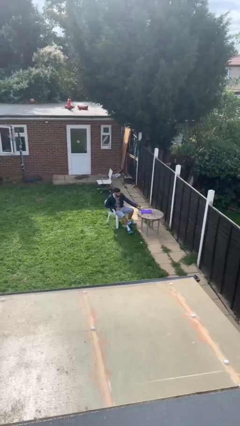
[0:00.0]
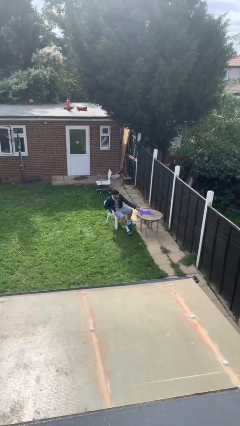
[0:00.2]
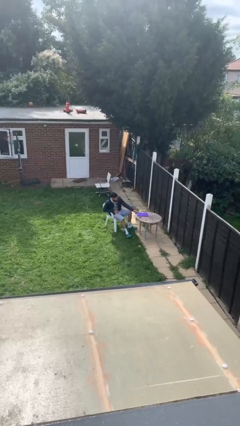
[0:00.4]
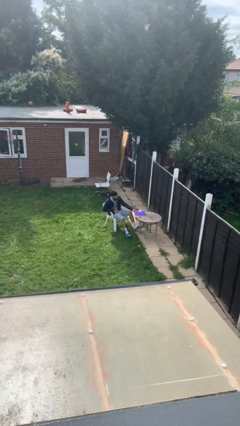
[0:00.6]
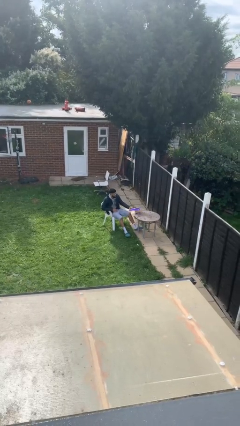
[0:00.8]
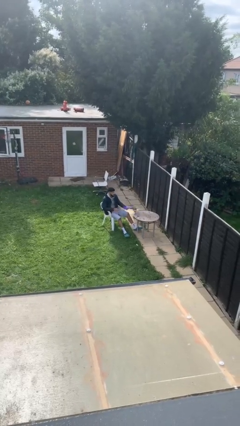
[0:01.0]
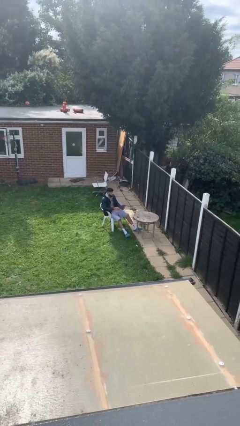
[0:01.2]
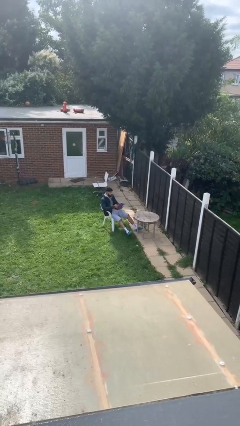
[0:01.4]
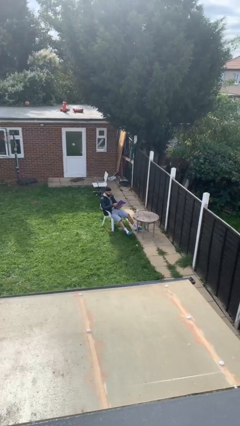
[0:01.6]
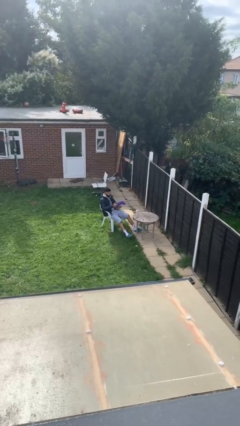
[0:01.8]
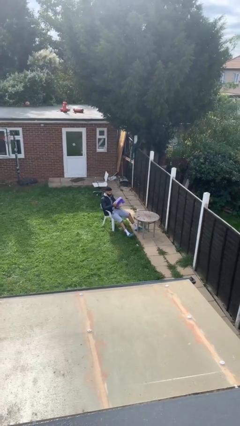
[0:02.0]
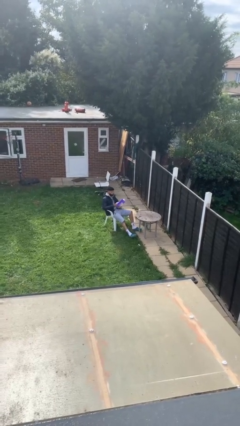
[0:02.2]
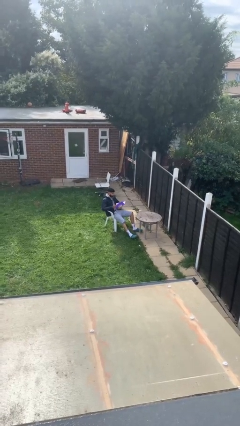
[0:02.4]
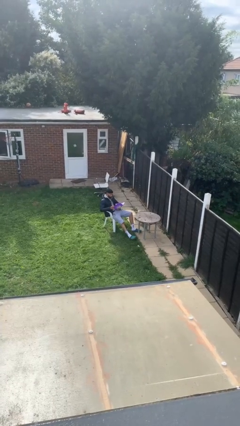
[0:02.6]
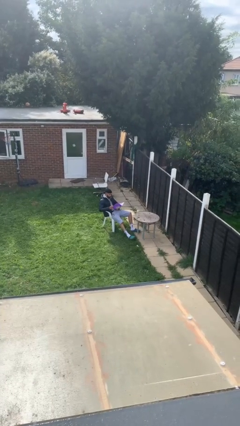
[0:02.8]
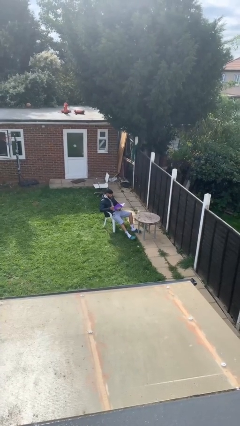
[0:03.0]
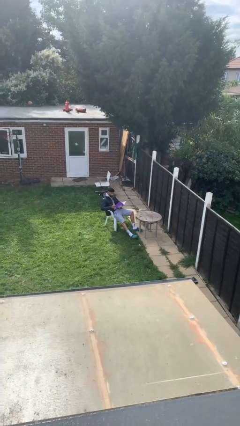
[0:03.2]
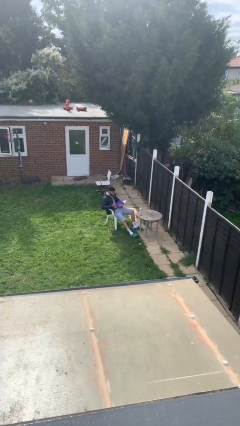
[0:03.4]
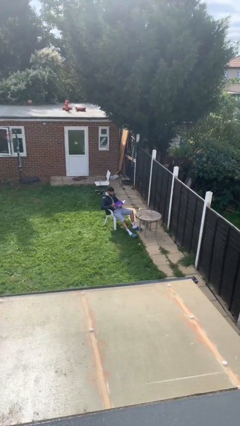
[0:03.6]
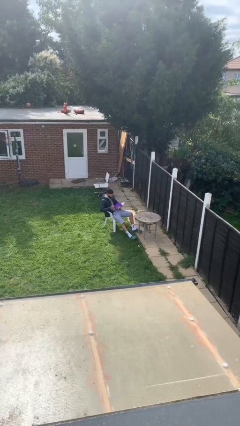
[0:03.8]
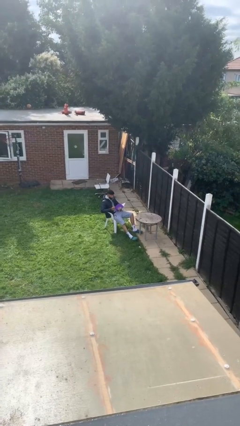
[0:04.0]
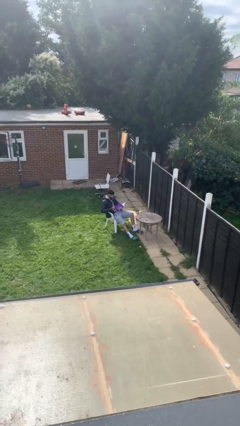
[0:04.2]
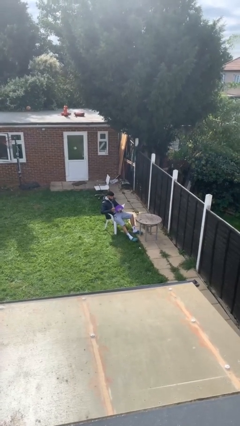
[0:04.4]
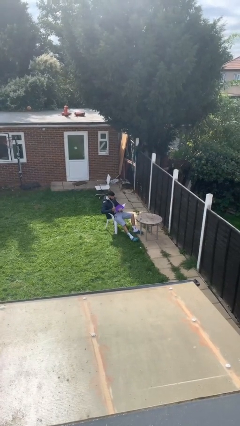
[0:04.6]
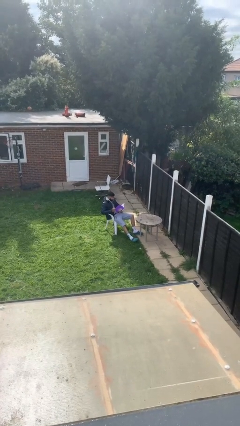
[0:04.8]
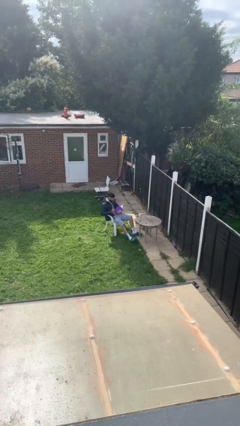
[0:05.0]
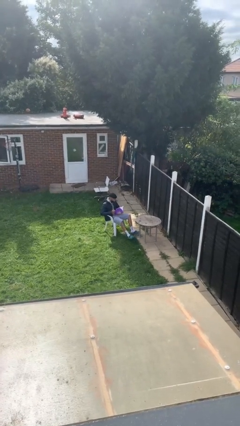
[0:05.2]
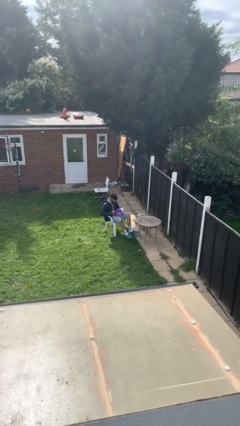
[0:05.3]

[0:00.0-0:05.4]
person reads document

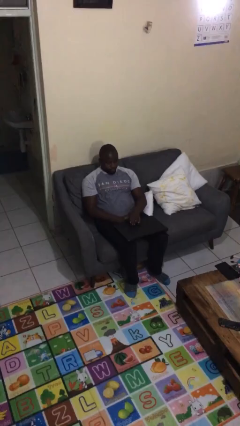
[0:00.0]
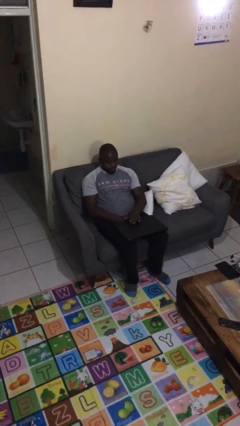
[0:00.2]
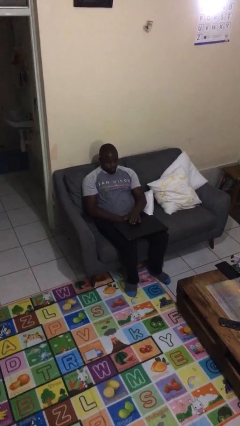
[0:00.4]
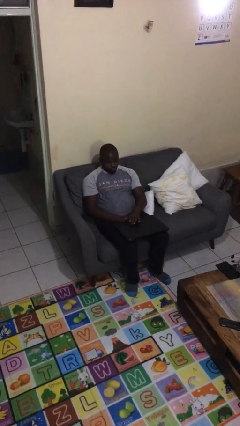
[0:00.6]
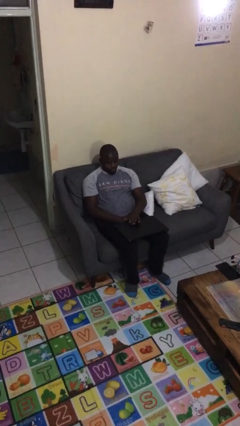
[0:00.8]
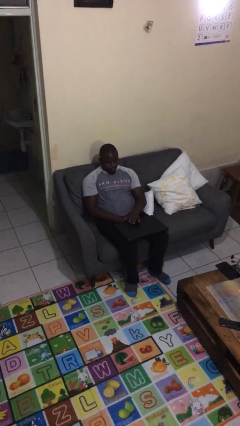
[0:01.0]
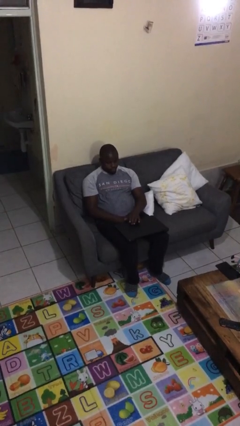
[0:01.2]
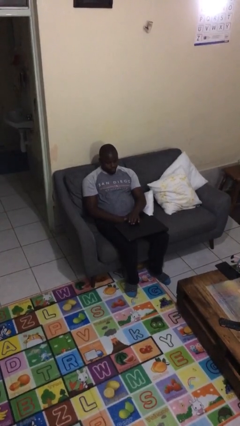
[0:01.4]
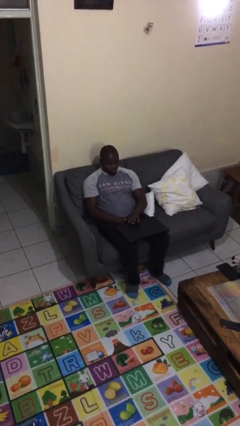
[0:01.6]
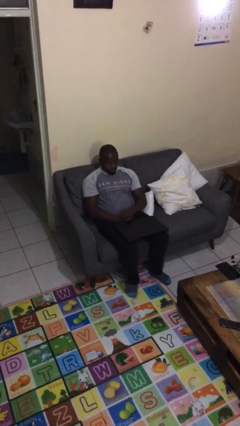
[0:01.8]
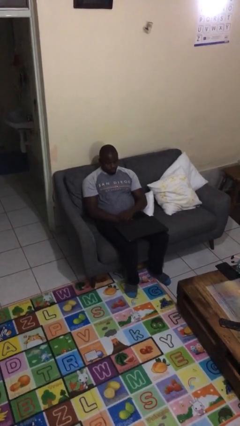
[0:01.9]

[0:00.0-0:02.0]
person taps object with finger

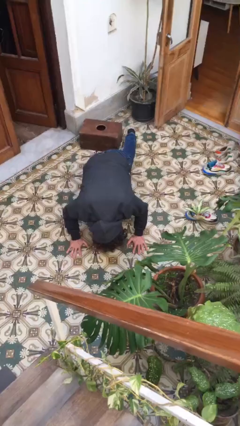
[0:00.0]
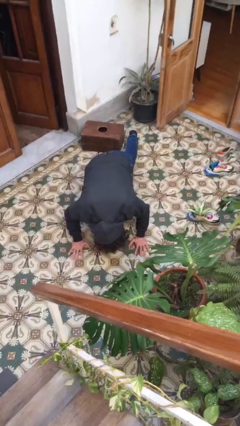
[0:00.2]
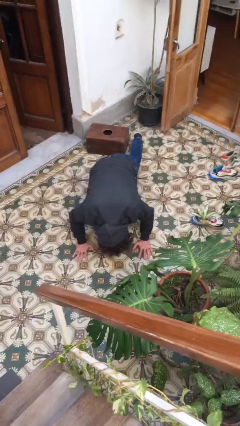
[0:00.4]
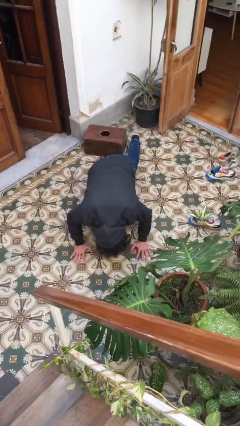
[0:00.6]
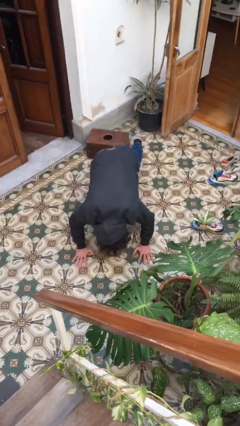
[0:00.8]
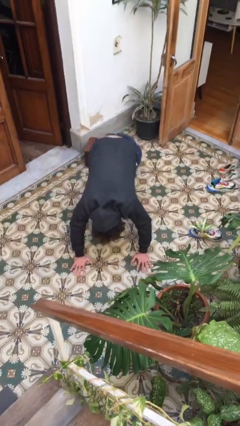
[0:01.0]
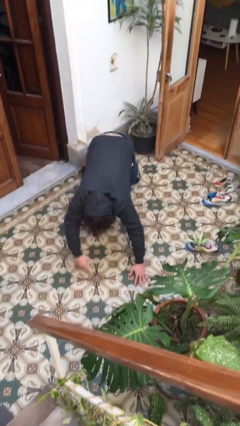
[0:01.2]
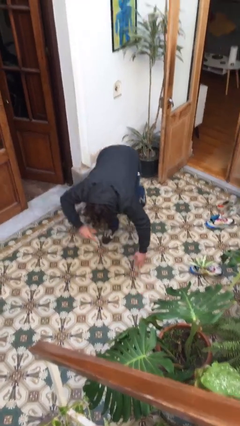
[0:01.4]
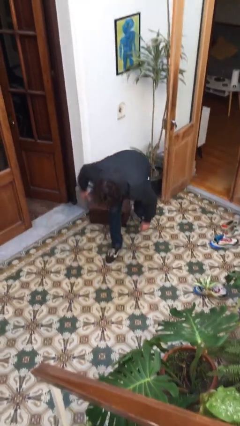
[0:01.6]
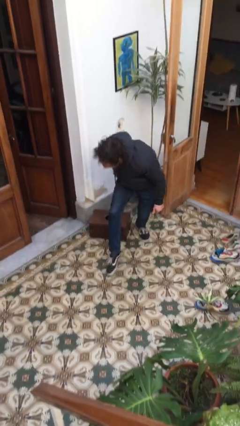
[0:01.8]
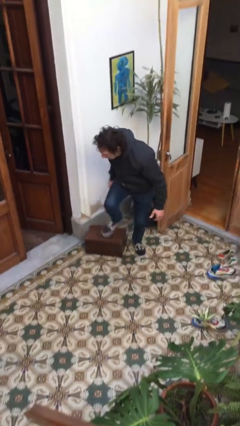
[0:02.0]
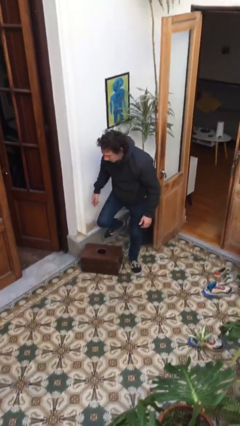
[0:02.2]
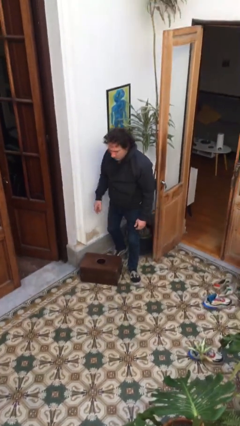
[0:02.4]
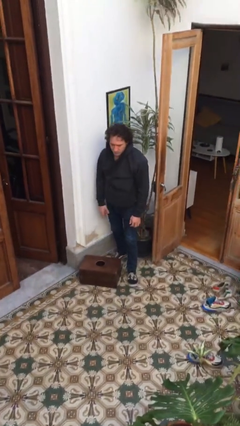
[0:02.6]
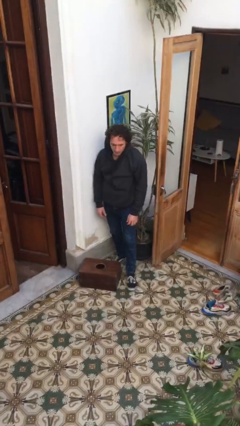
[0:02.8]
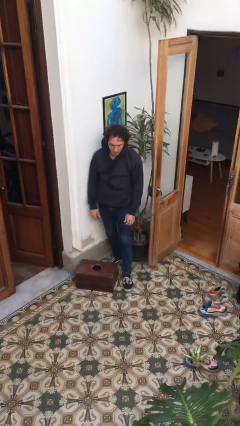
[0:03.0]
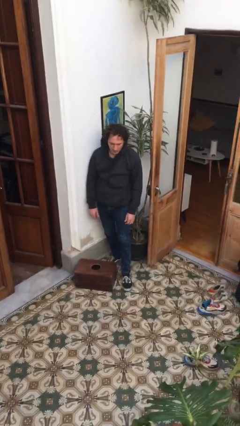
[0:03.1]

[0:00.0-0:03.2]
person stands up from floor

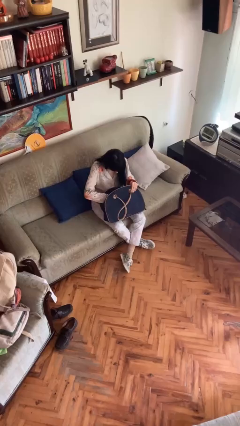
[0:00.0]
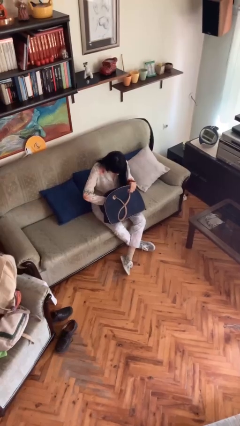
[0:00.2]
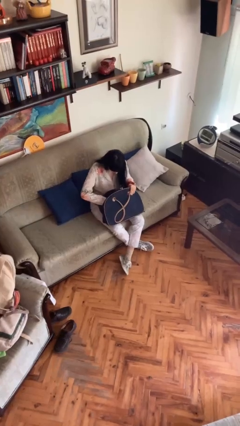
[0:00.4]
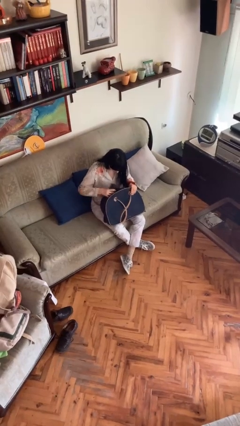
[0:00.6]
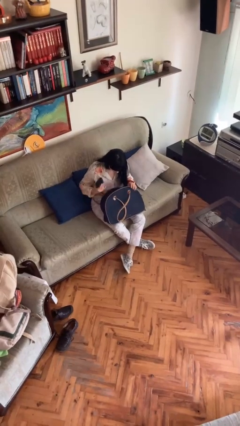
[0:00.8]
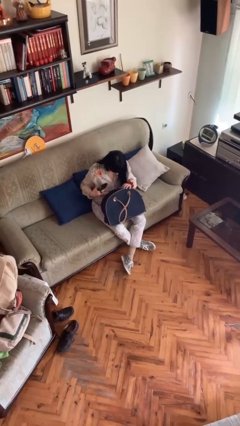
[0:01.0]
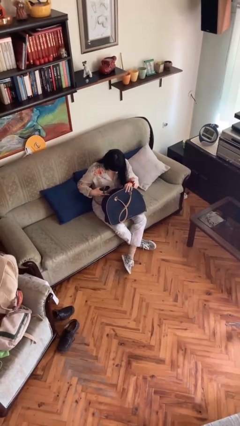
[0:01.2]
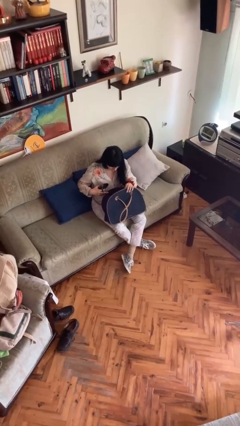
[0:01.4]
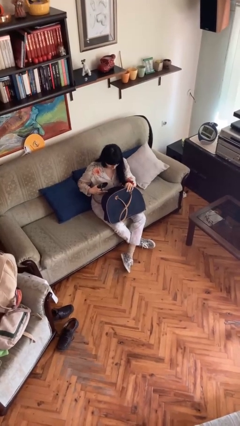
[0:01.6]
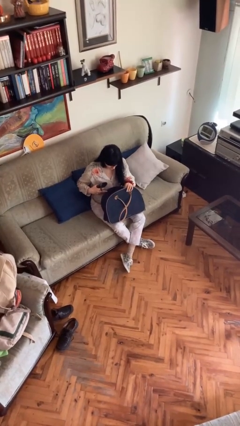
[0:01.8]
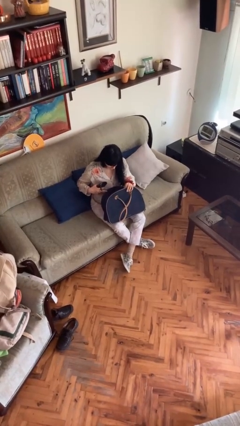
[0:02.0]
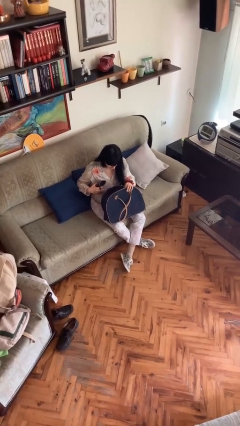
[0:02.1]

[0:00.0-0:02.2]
person takes object from purse

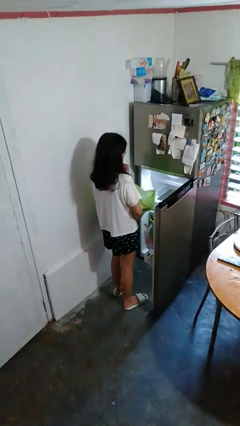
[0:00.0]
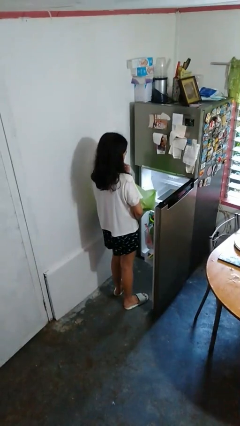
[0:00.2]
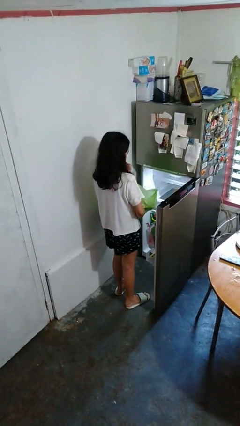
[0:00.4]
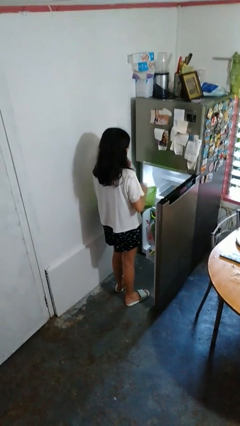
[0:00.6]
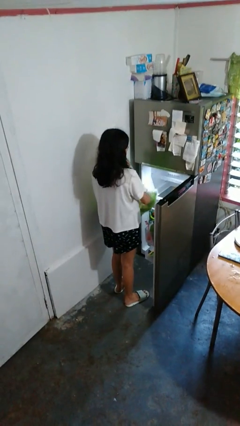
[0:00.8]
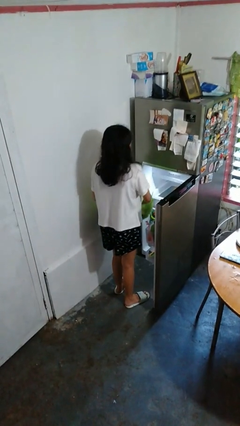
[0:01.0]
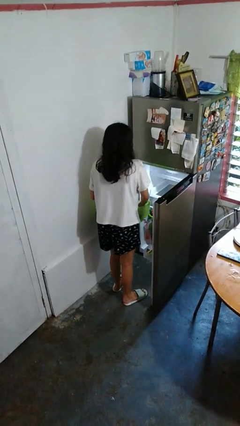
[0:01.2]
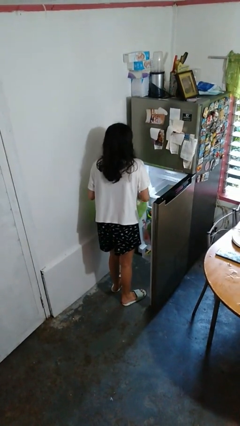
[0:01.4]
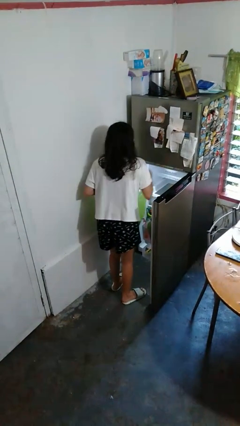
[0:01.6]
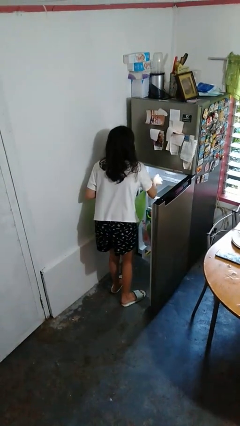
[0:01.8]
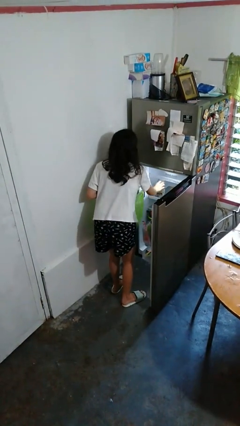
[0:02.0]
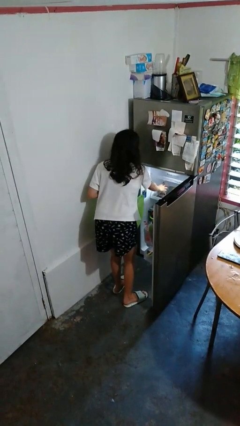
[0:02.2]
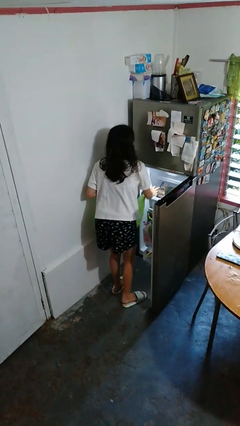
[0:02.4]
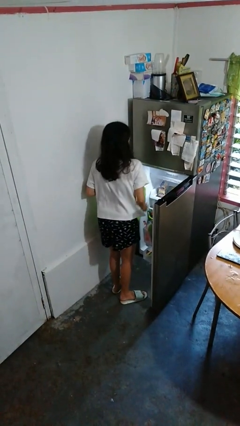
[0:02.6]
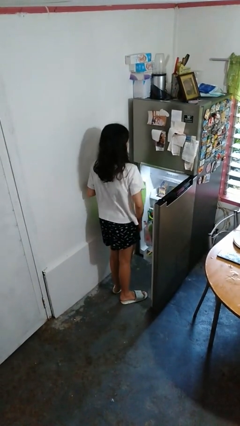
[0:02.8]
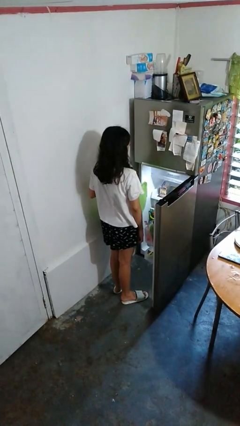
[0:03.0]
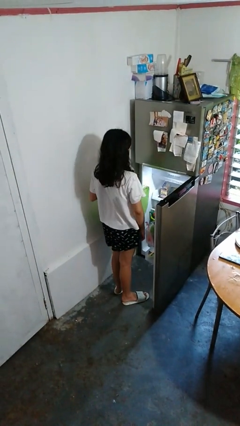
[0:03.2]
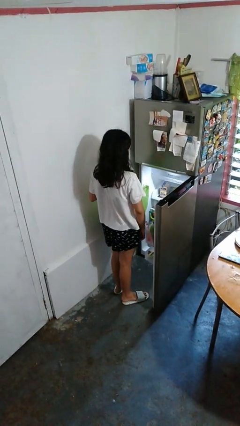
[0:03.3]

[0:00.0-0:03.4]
person loads groceries into refrigerator

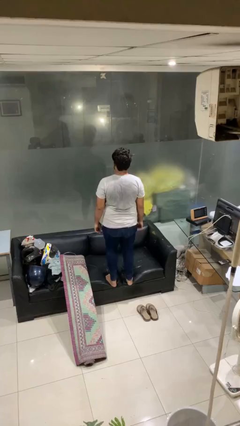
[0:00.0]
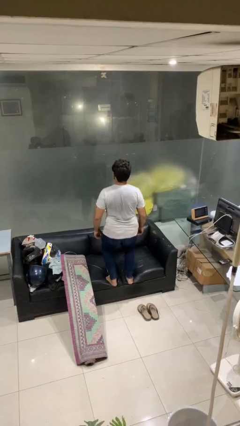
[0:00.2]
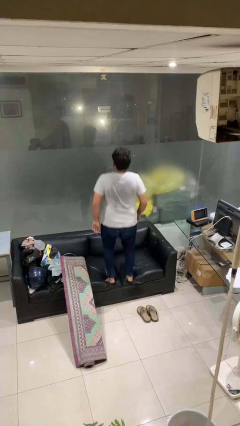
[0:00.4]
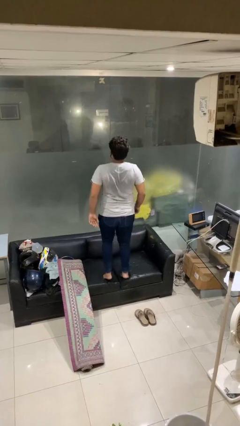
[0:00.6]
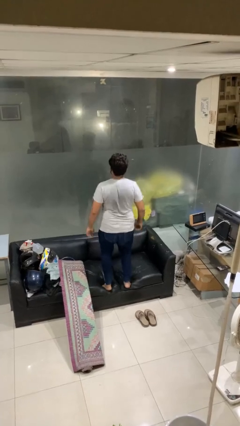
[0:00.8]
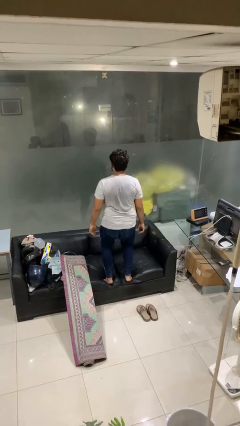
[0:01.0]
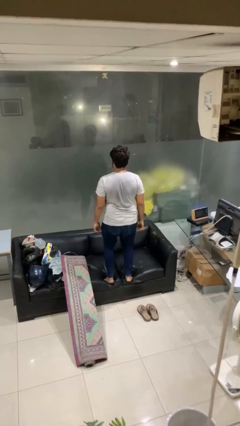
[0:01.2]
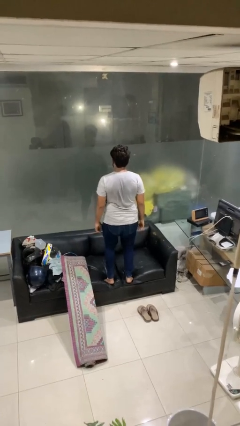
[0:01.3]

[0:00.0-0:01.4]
person jumps on couch
